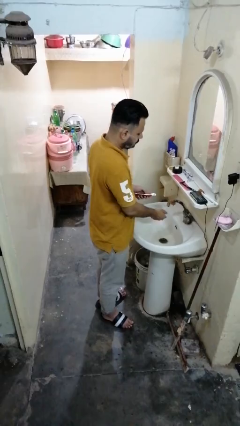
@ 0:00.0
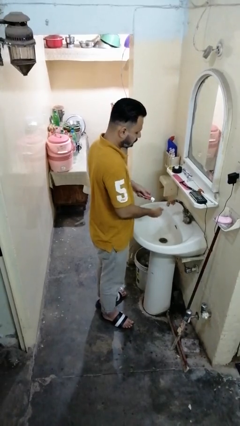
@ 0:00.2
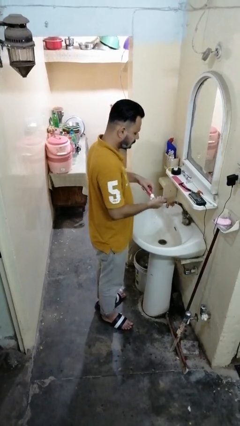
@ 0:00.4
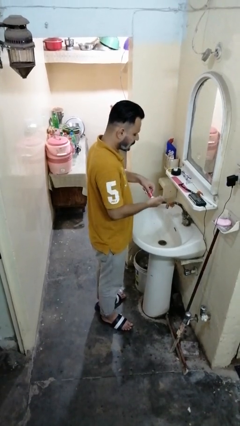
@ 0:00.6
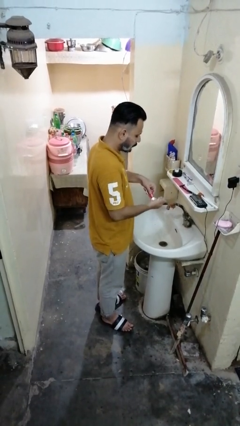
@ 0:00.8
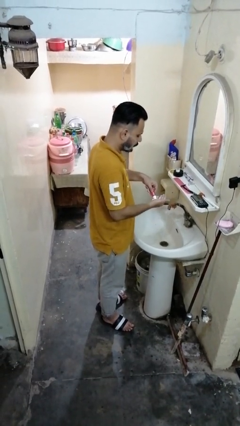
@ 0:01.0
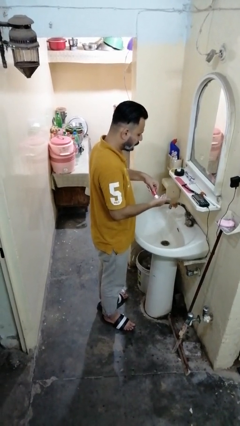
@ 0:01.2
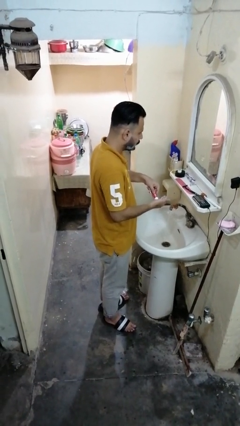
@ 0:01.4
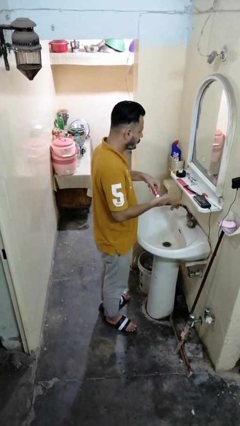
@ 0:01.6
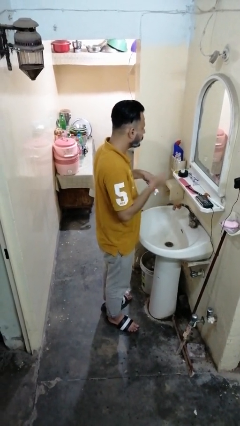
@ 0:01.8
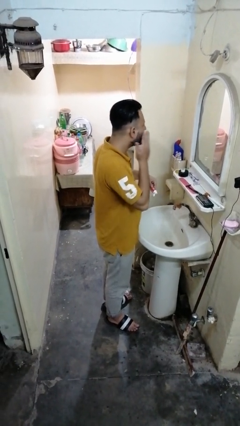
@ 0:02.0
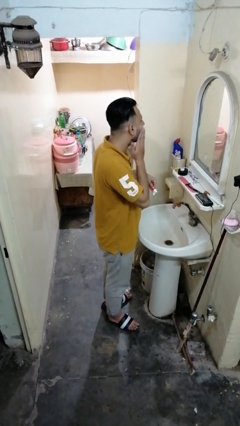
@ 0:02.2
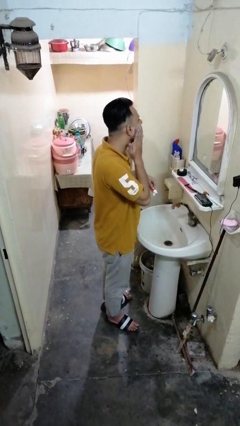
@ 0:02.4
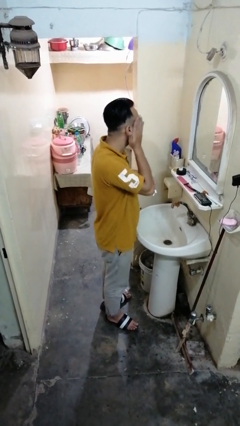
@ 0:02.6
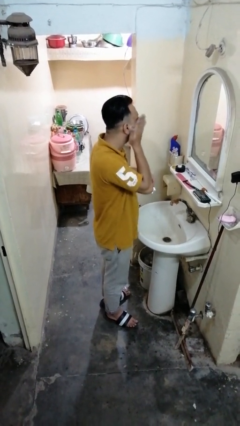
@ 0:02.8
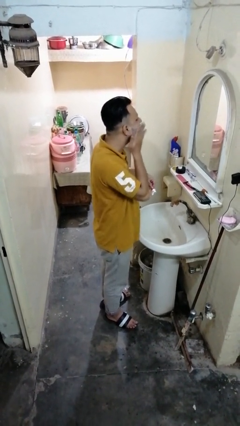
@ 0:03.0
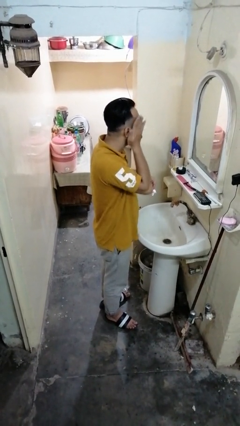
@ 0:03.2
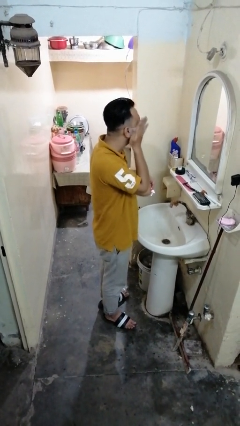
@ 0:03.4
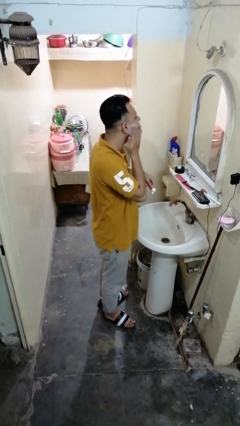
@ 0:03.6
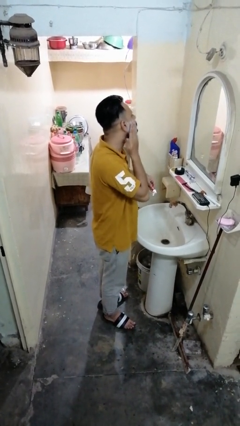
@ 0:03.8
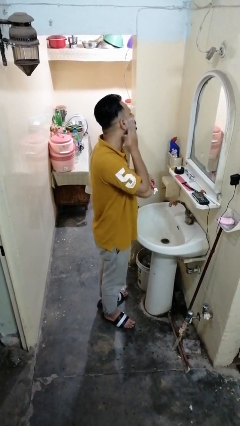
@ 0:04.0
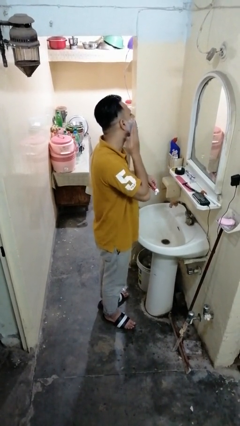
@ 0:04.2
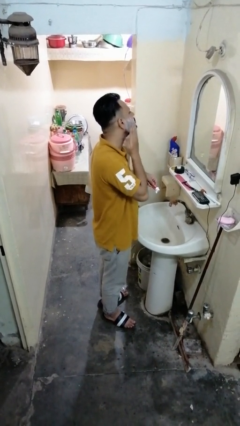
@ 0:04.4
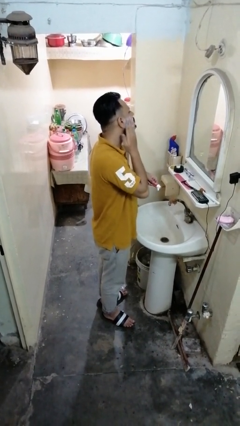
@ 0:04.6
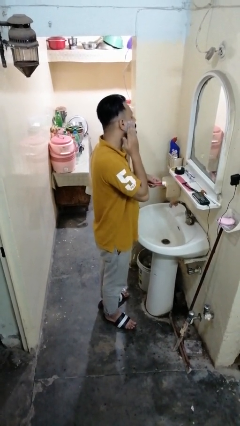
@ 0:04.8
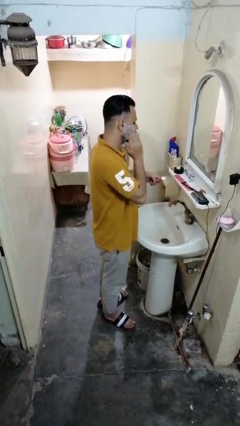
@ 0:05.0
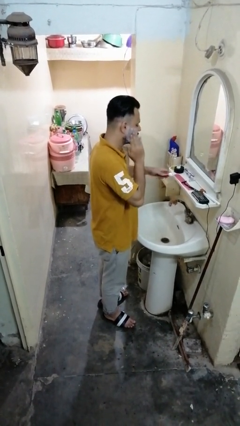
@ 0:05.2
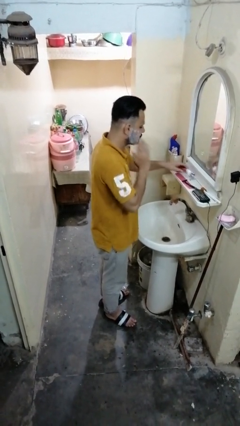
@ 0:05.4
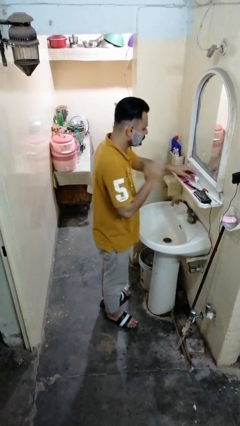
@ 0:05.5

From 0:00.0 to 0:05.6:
person applies shaving cream

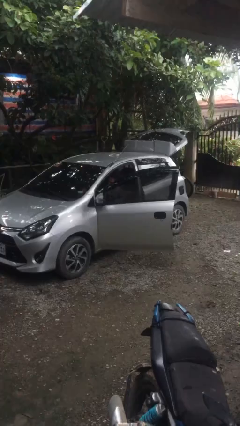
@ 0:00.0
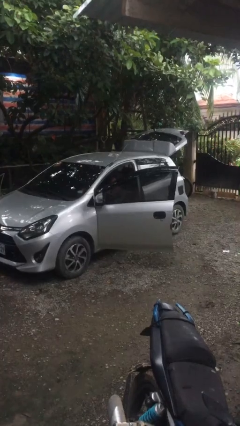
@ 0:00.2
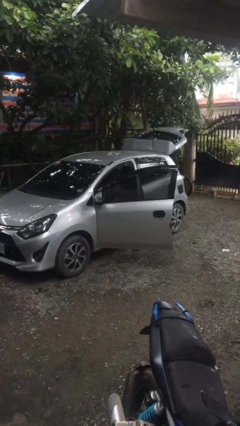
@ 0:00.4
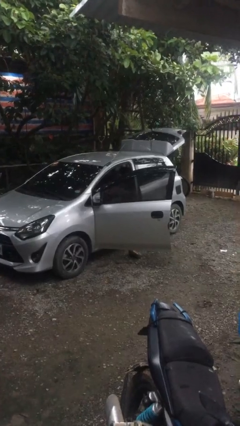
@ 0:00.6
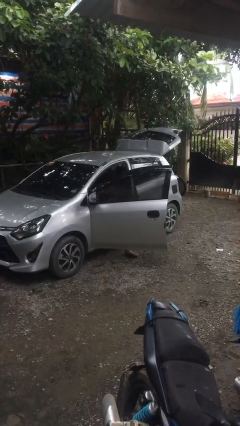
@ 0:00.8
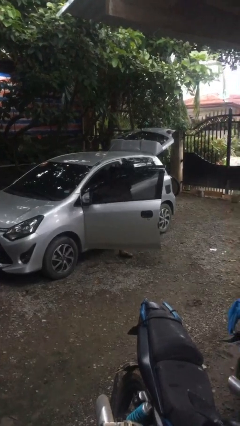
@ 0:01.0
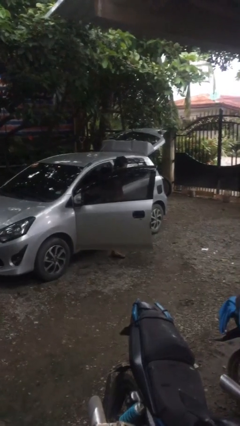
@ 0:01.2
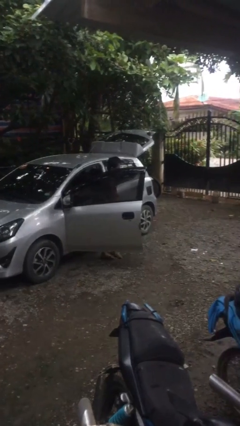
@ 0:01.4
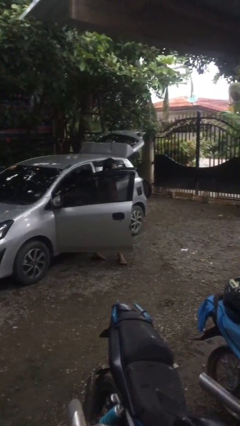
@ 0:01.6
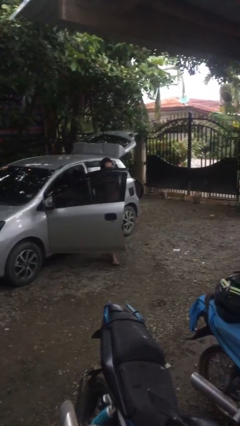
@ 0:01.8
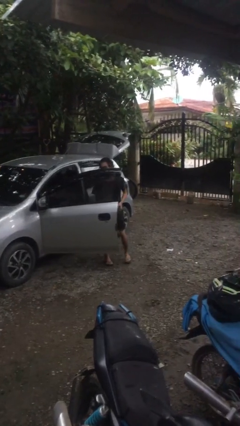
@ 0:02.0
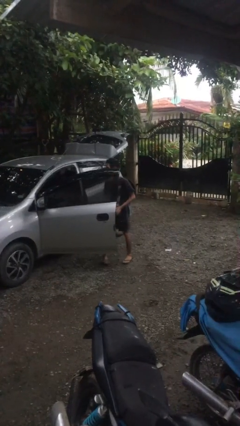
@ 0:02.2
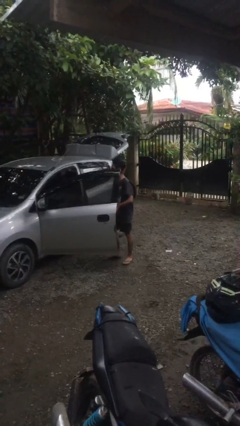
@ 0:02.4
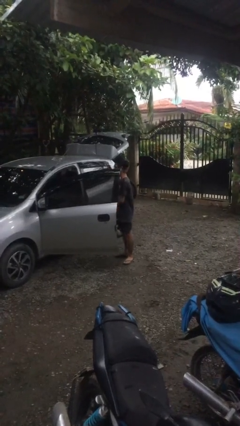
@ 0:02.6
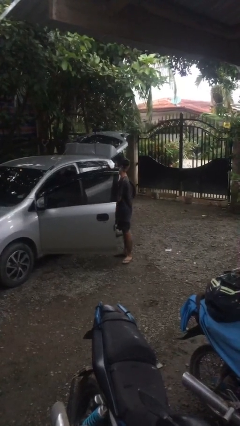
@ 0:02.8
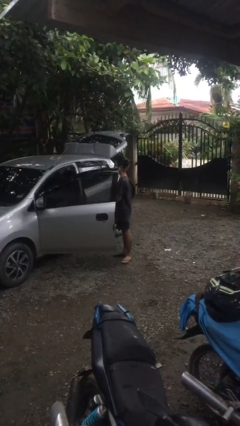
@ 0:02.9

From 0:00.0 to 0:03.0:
person exits car

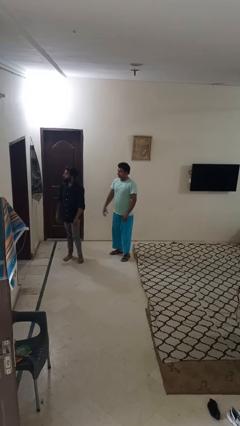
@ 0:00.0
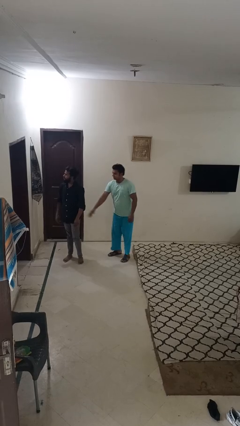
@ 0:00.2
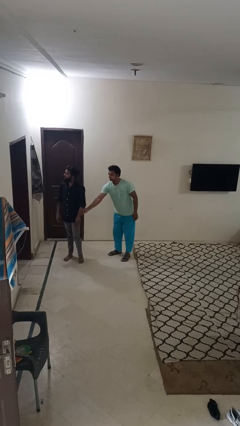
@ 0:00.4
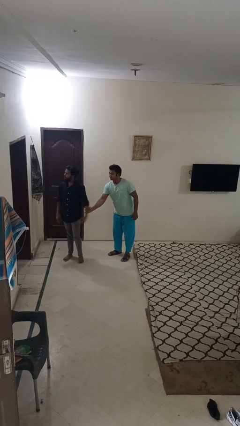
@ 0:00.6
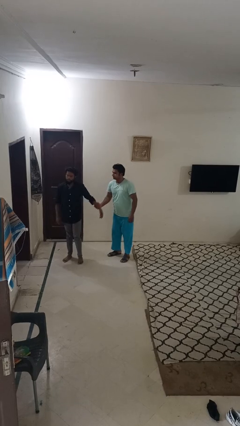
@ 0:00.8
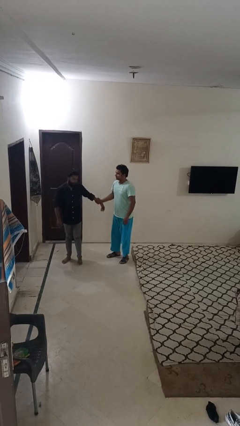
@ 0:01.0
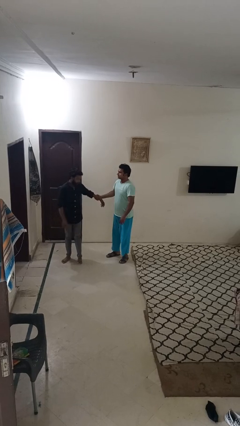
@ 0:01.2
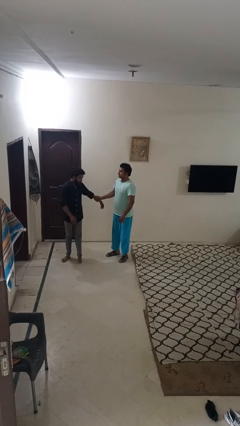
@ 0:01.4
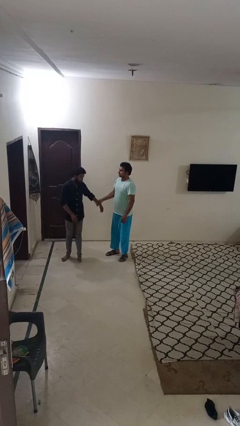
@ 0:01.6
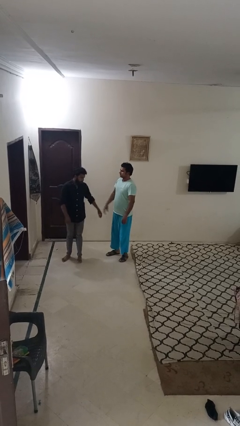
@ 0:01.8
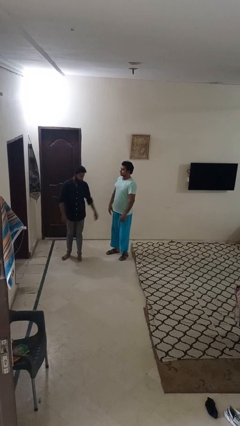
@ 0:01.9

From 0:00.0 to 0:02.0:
person grabs person by forearm

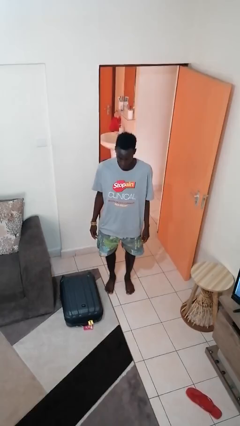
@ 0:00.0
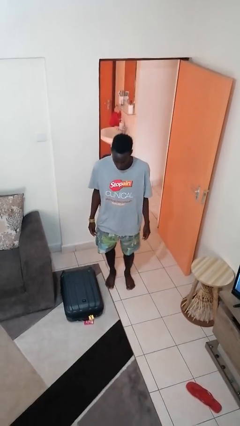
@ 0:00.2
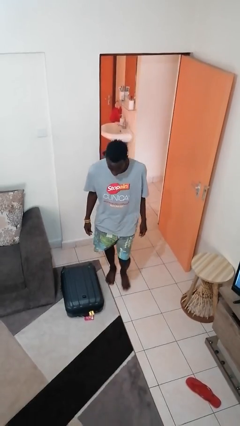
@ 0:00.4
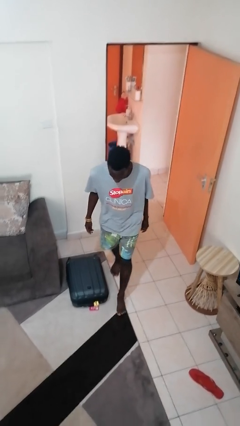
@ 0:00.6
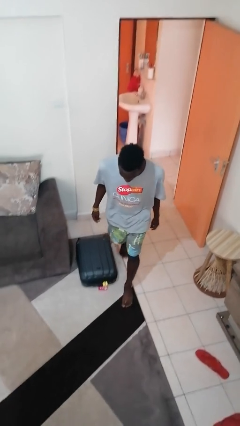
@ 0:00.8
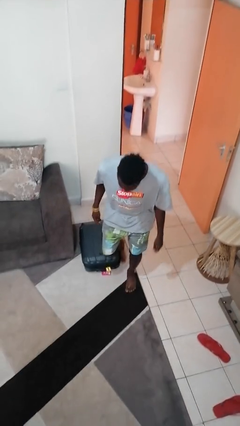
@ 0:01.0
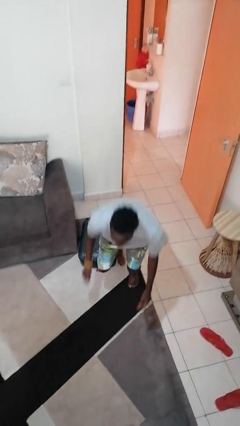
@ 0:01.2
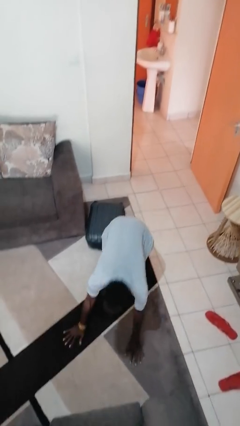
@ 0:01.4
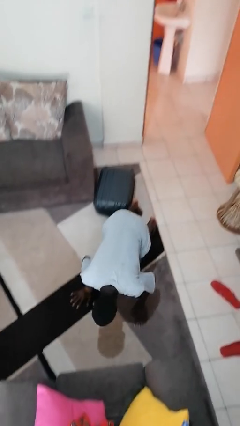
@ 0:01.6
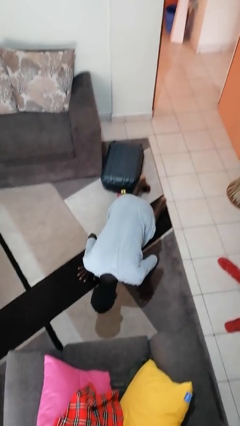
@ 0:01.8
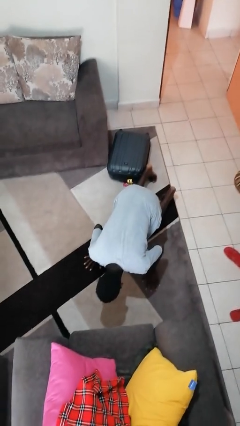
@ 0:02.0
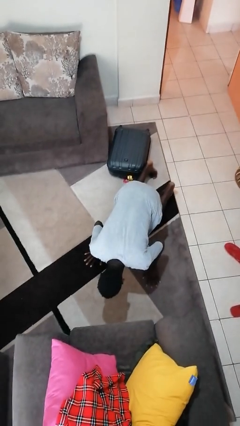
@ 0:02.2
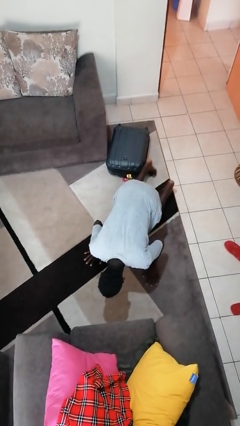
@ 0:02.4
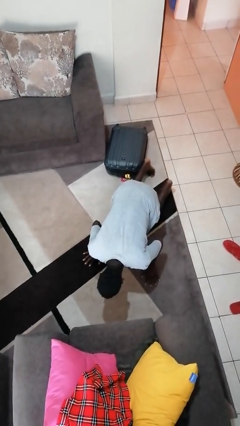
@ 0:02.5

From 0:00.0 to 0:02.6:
person trips on object on floor

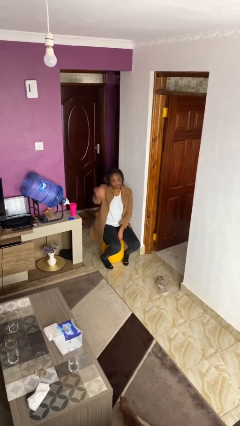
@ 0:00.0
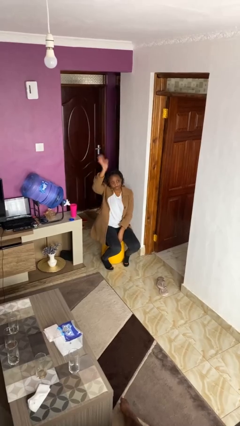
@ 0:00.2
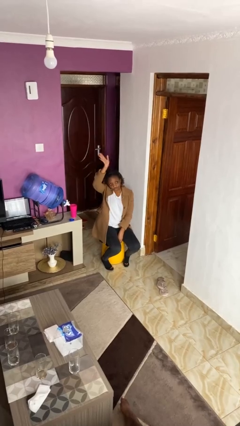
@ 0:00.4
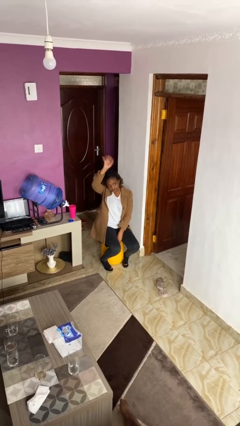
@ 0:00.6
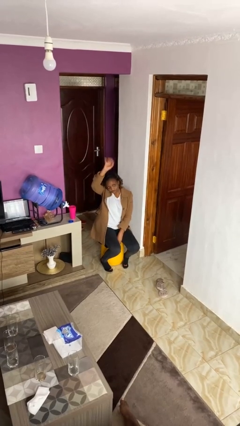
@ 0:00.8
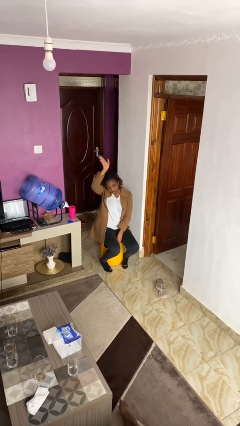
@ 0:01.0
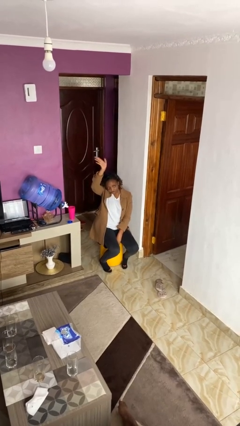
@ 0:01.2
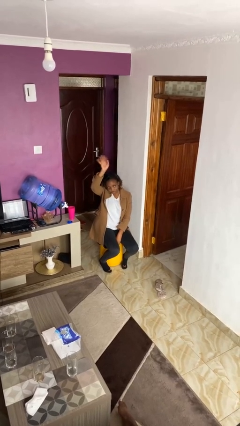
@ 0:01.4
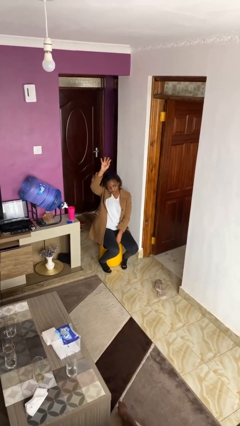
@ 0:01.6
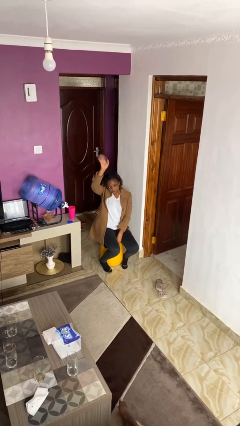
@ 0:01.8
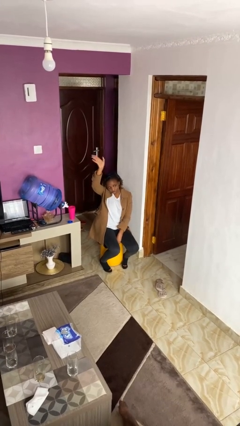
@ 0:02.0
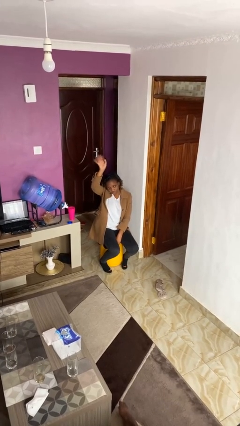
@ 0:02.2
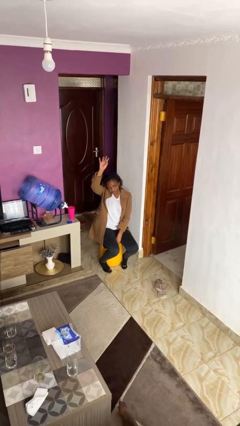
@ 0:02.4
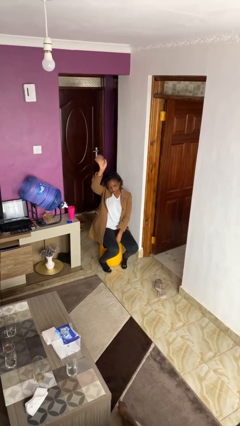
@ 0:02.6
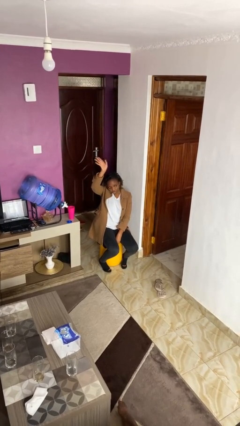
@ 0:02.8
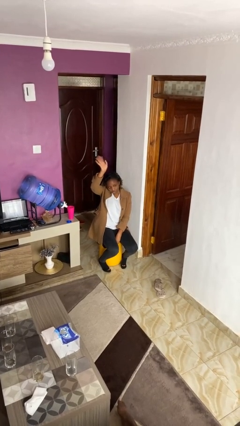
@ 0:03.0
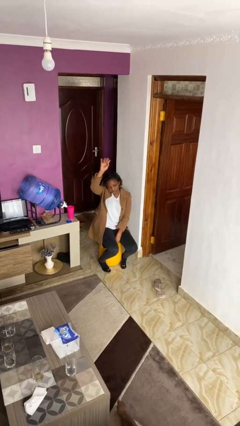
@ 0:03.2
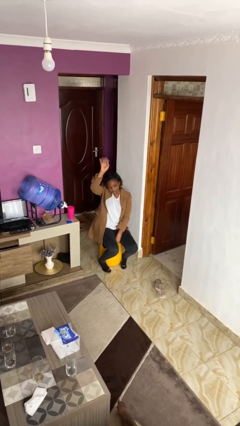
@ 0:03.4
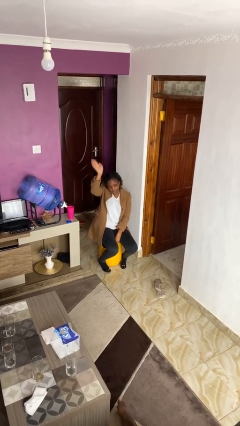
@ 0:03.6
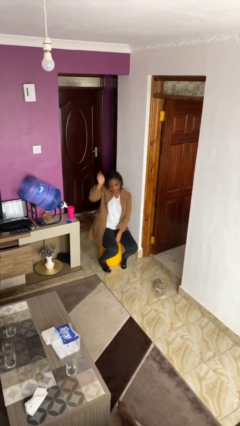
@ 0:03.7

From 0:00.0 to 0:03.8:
person gestures raise hand

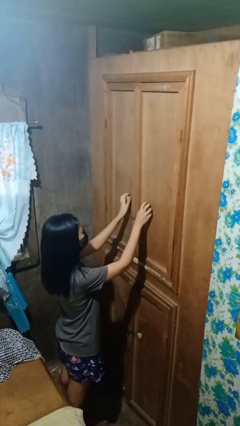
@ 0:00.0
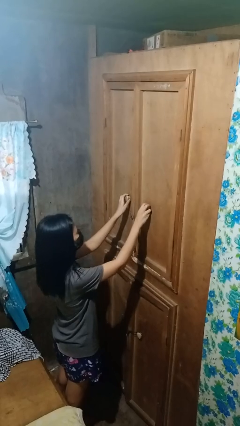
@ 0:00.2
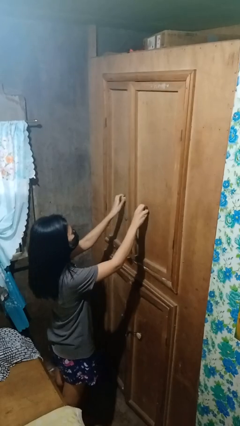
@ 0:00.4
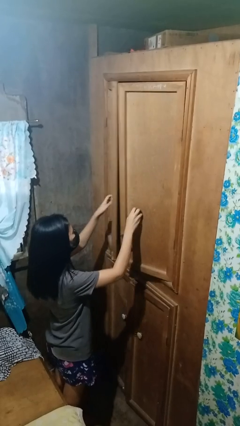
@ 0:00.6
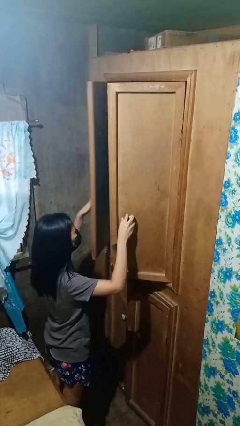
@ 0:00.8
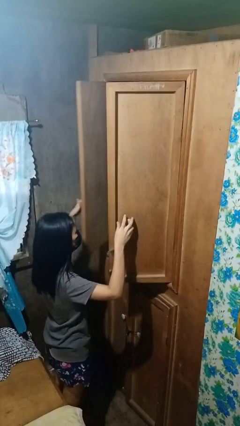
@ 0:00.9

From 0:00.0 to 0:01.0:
person opens closet door
